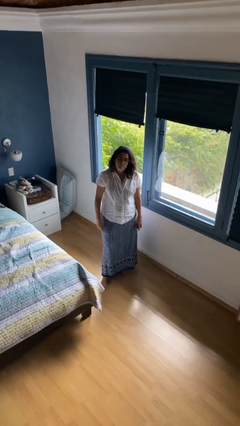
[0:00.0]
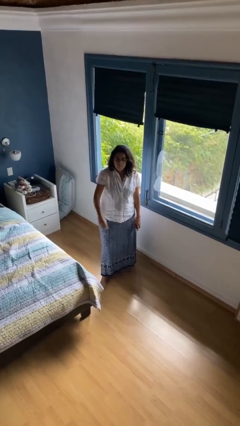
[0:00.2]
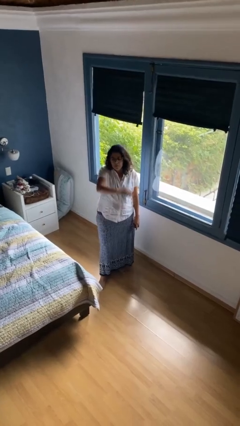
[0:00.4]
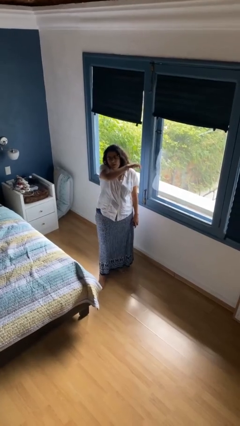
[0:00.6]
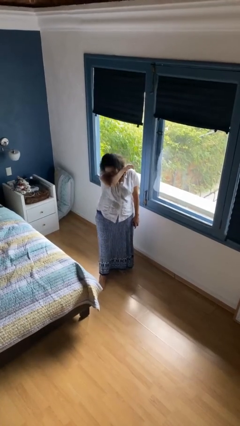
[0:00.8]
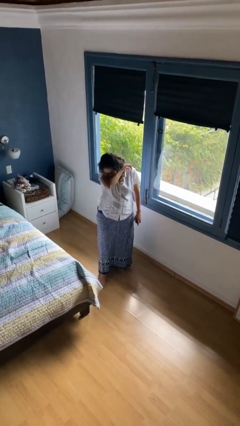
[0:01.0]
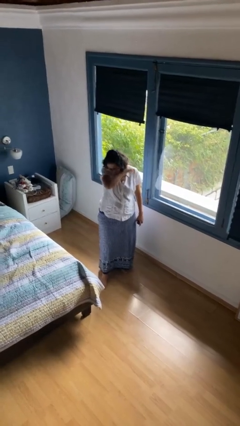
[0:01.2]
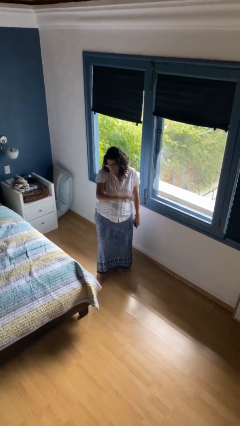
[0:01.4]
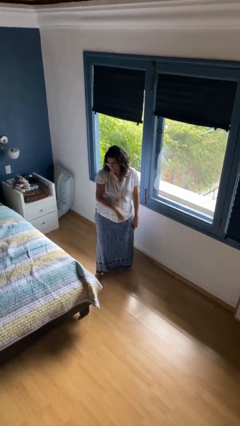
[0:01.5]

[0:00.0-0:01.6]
person sneezes into arm

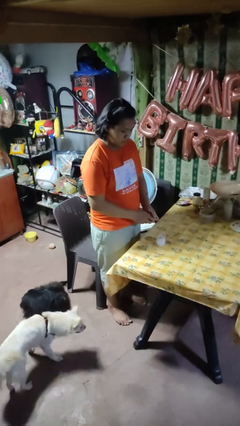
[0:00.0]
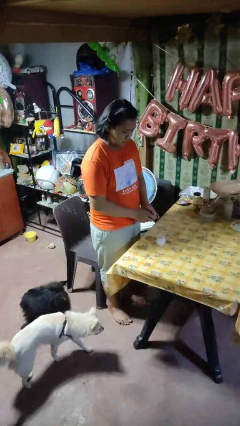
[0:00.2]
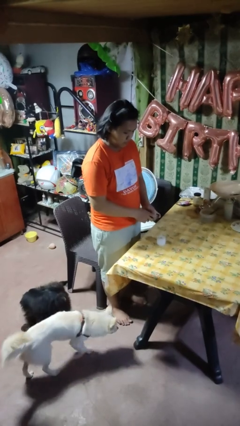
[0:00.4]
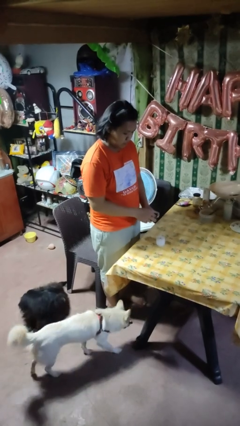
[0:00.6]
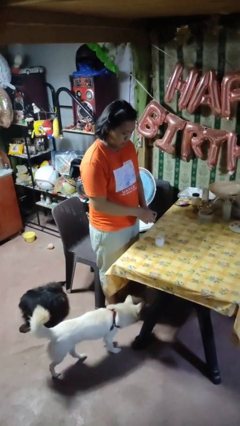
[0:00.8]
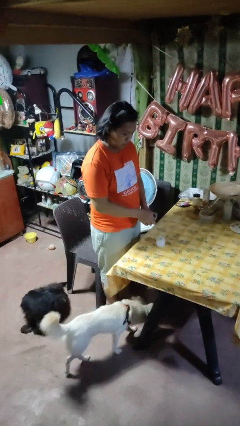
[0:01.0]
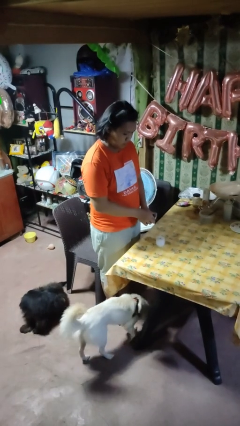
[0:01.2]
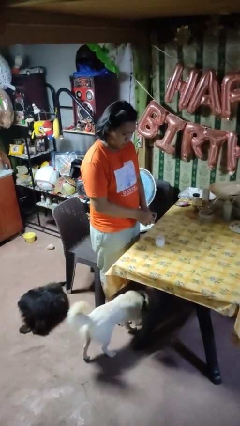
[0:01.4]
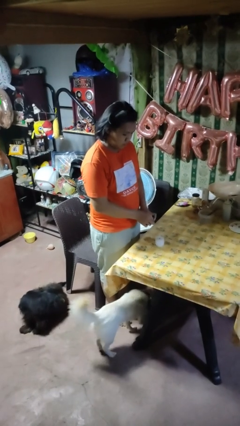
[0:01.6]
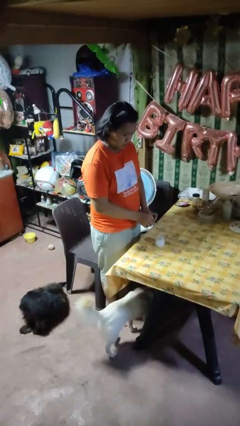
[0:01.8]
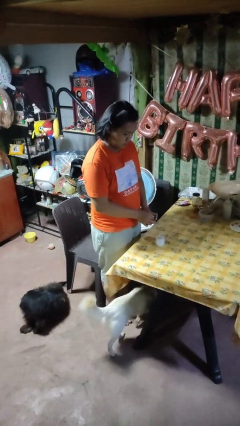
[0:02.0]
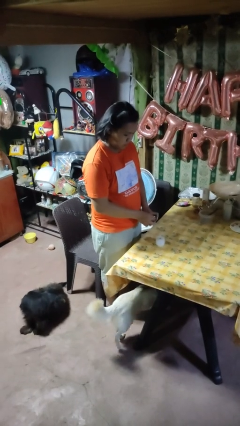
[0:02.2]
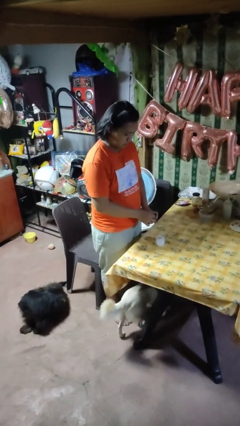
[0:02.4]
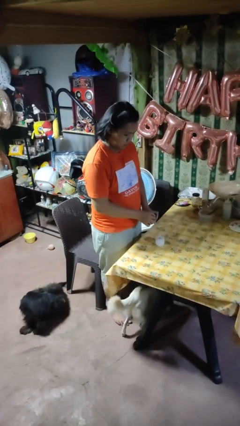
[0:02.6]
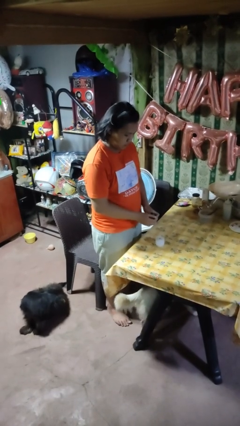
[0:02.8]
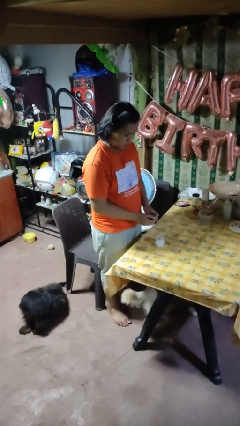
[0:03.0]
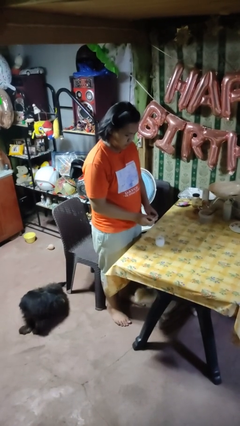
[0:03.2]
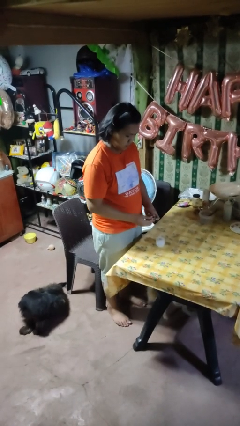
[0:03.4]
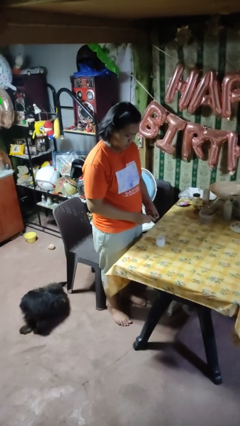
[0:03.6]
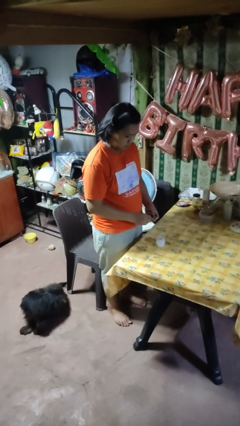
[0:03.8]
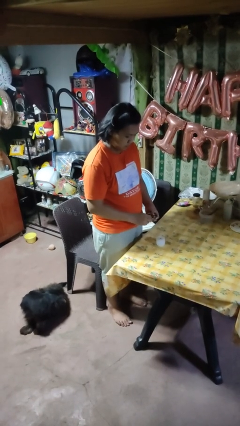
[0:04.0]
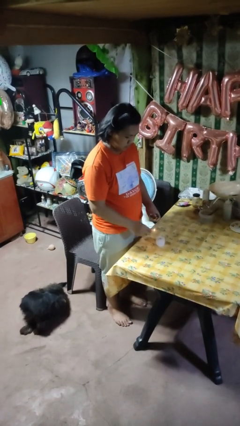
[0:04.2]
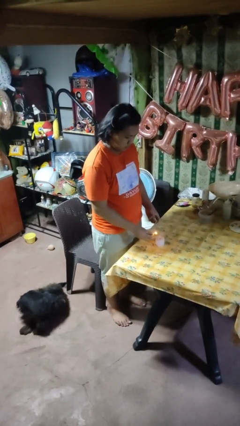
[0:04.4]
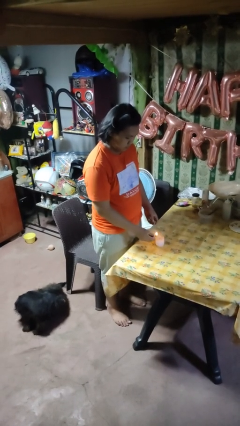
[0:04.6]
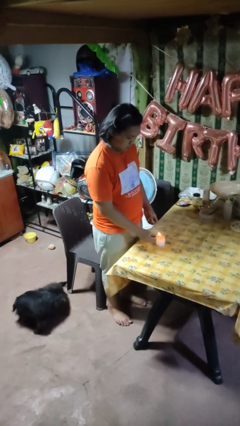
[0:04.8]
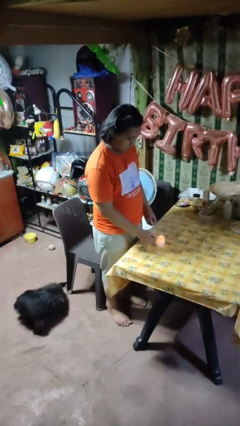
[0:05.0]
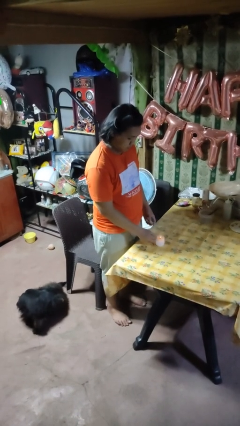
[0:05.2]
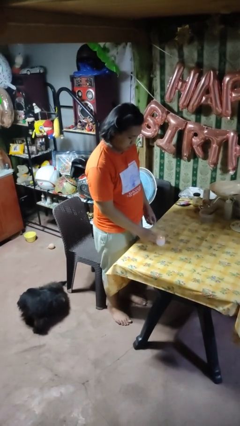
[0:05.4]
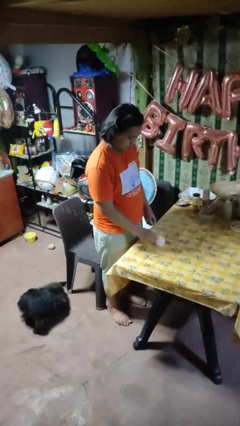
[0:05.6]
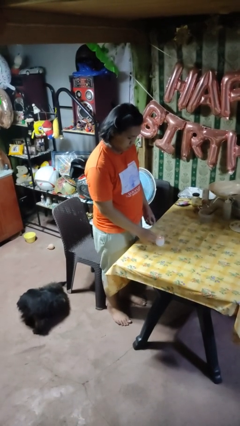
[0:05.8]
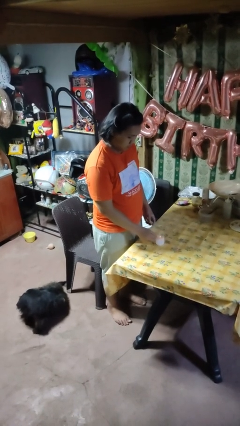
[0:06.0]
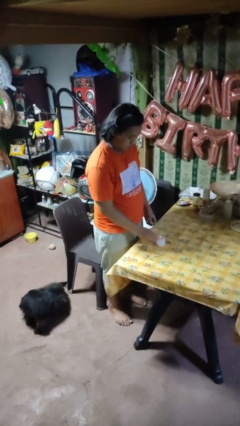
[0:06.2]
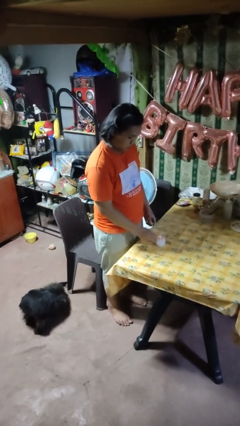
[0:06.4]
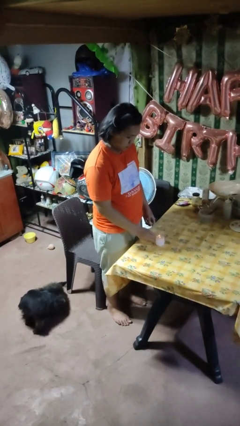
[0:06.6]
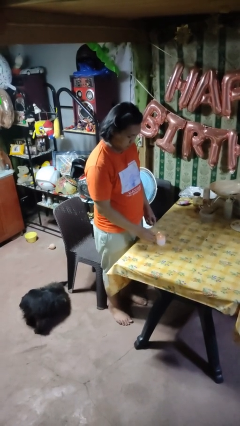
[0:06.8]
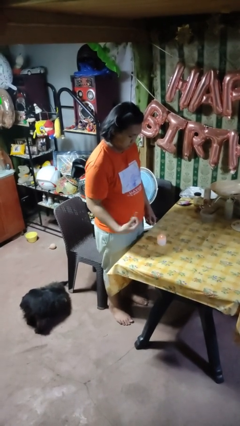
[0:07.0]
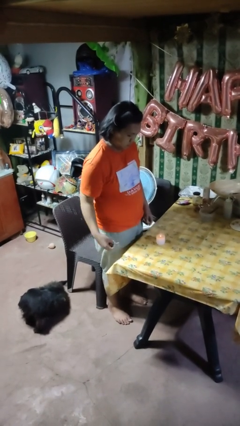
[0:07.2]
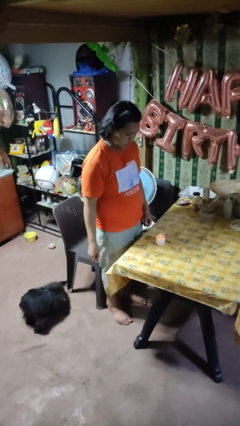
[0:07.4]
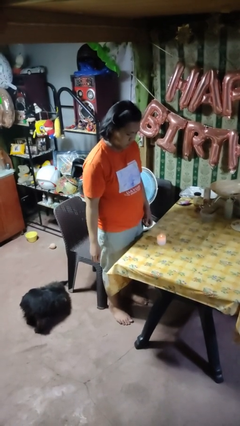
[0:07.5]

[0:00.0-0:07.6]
person lights candle

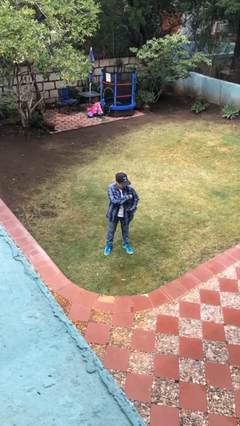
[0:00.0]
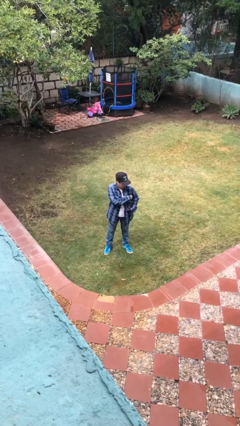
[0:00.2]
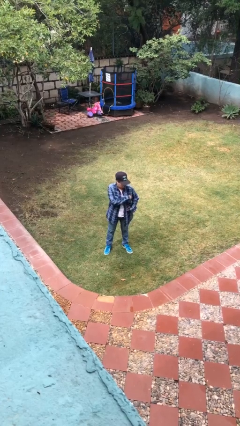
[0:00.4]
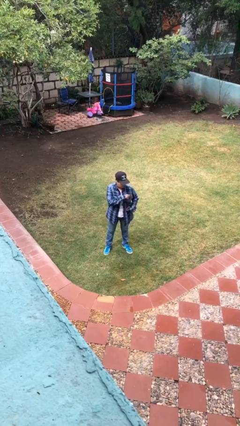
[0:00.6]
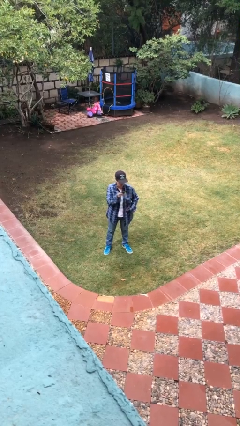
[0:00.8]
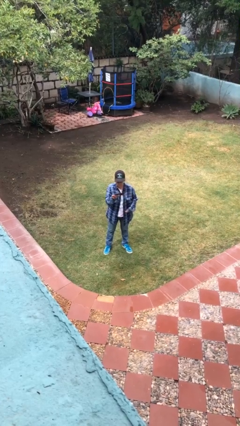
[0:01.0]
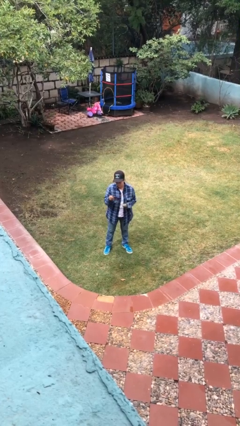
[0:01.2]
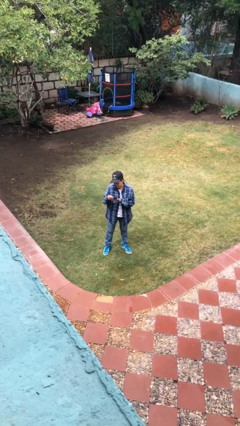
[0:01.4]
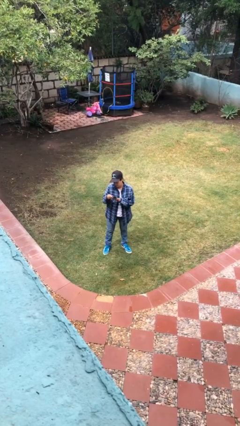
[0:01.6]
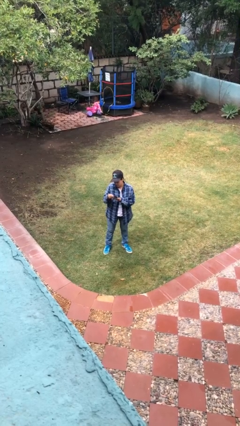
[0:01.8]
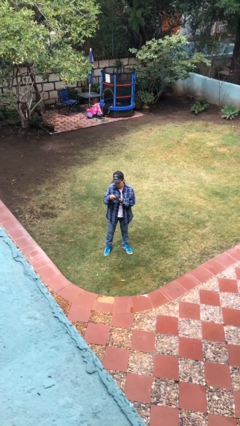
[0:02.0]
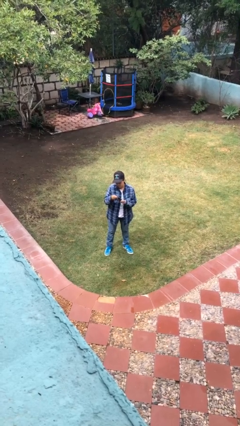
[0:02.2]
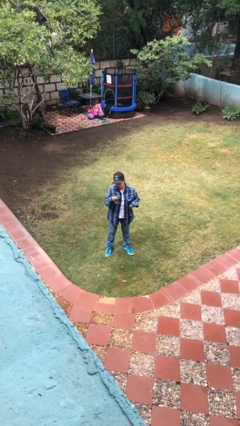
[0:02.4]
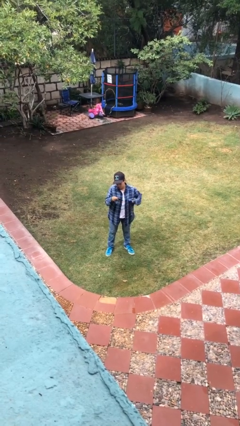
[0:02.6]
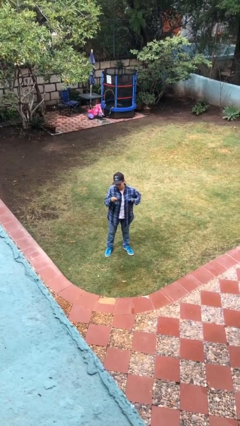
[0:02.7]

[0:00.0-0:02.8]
person takes phone from pocket

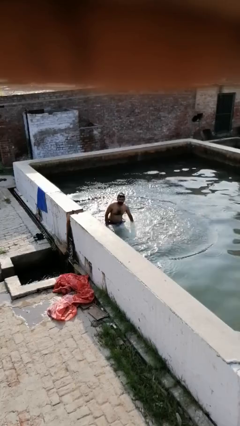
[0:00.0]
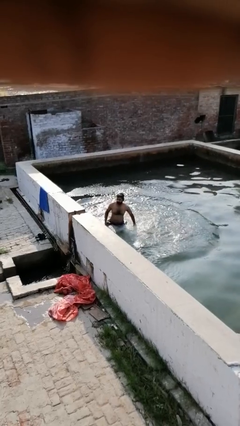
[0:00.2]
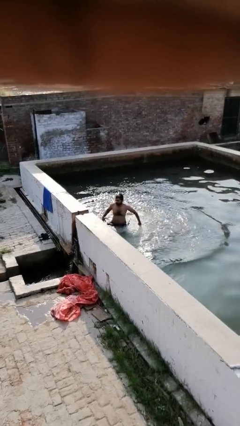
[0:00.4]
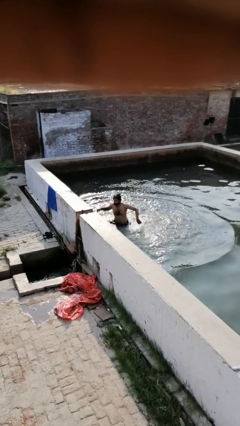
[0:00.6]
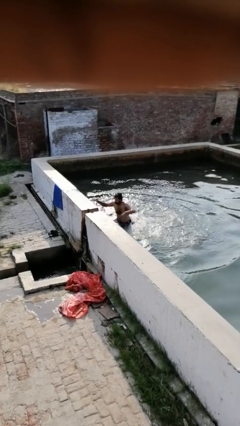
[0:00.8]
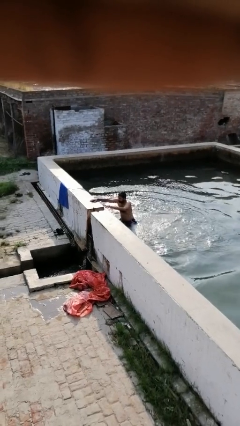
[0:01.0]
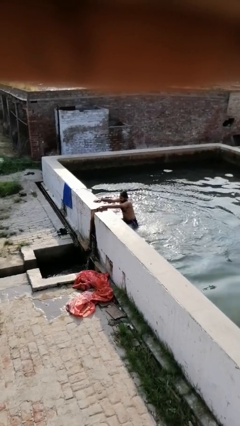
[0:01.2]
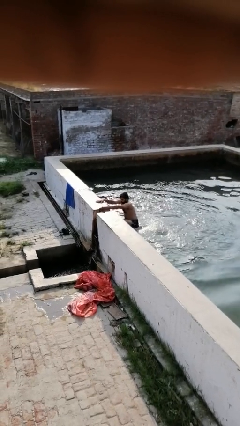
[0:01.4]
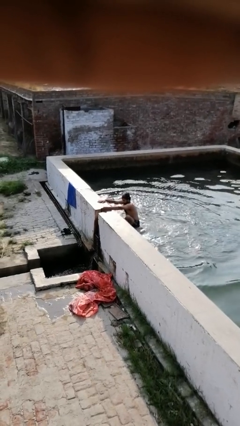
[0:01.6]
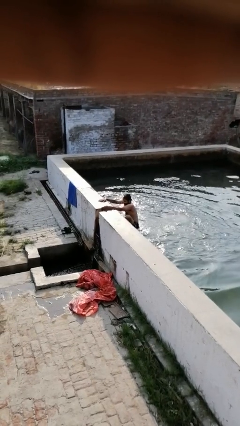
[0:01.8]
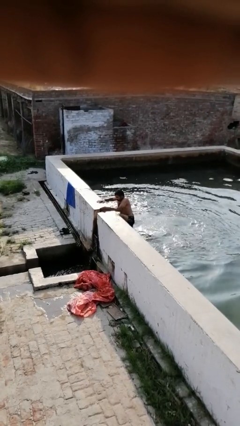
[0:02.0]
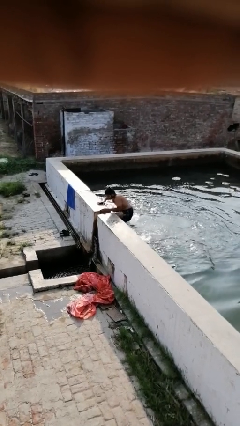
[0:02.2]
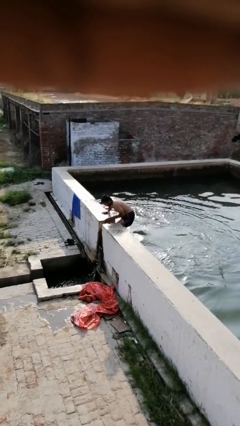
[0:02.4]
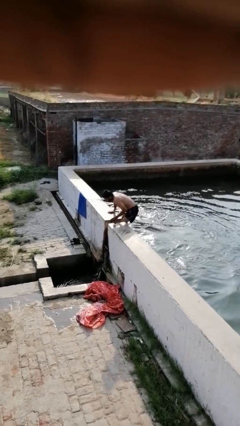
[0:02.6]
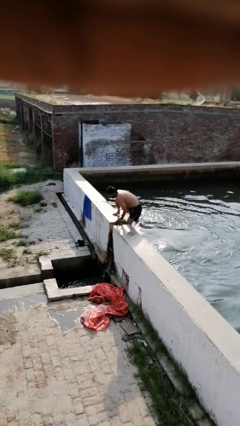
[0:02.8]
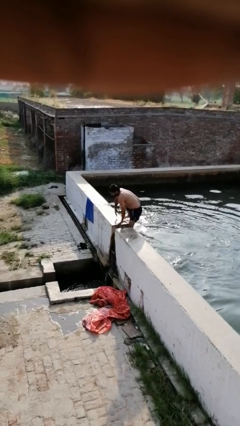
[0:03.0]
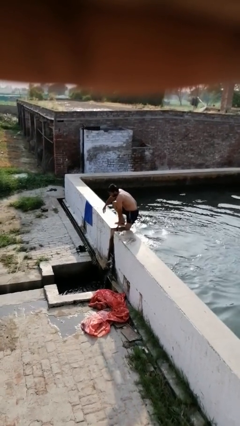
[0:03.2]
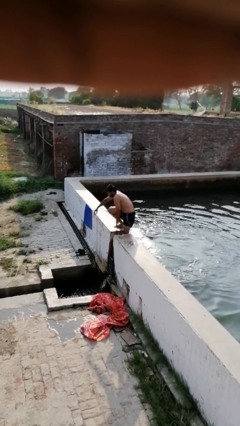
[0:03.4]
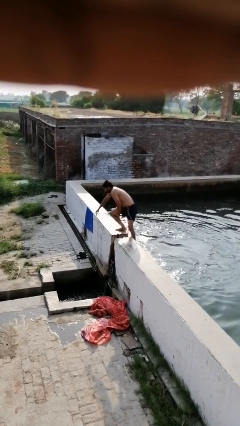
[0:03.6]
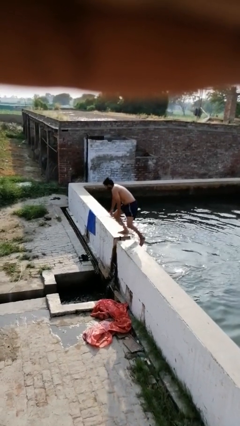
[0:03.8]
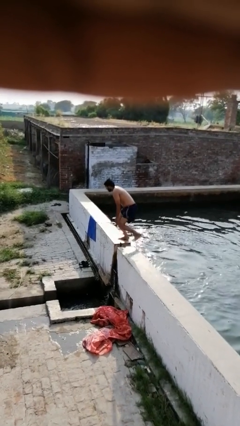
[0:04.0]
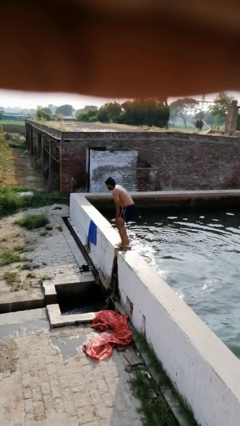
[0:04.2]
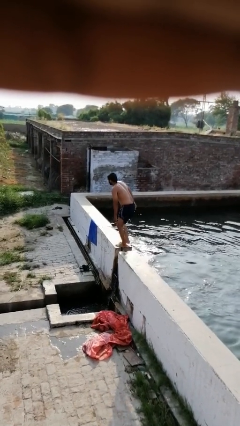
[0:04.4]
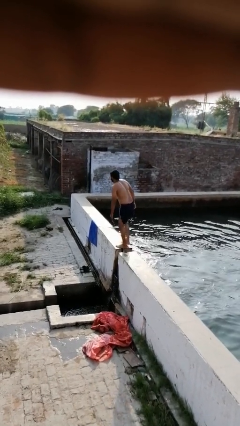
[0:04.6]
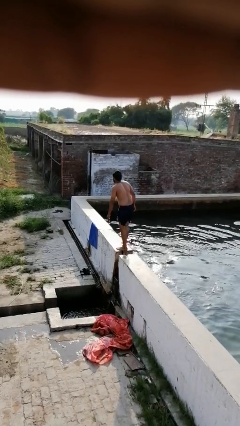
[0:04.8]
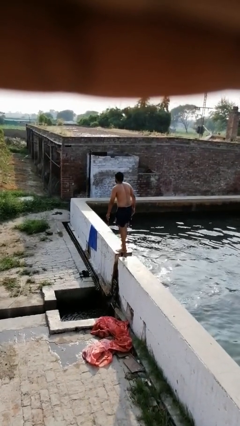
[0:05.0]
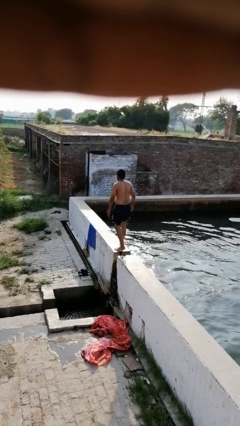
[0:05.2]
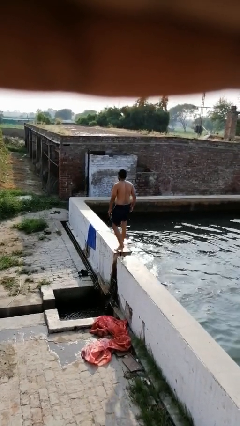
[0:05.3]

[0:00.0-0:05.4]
person exits pool
